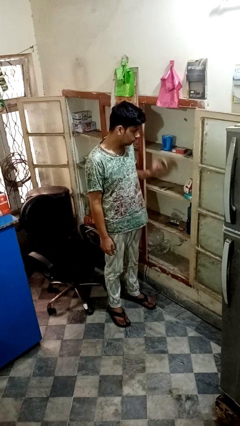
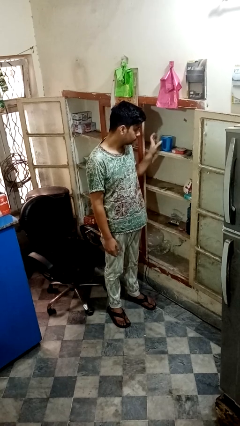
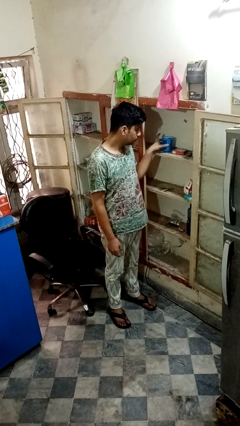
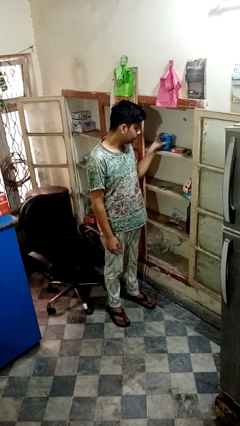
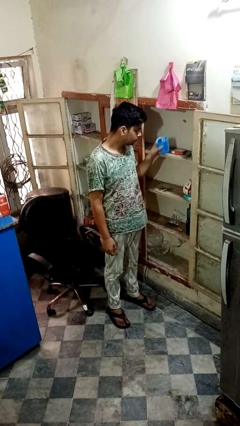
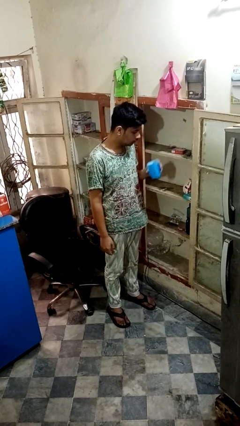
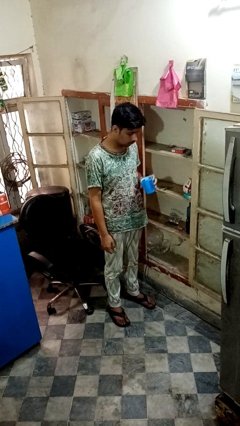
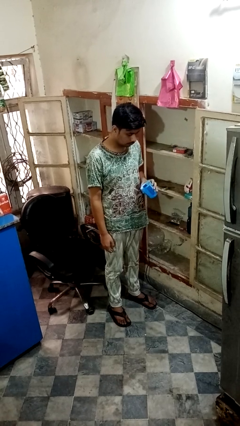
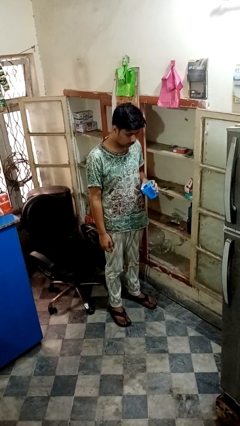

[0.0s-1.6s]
person takes object from cabinet

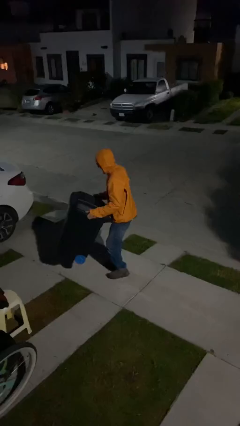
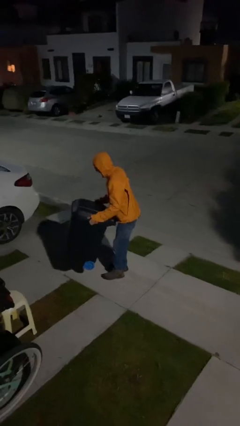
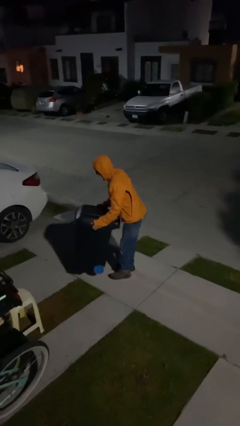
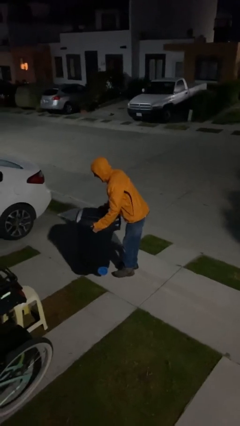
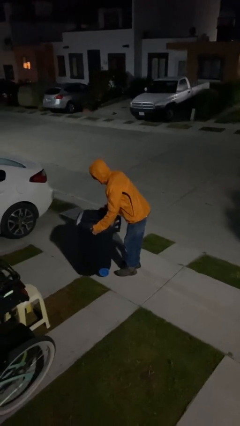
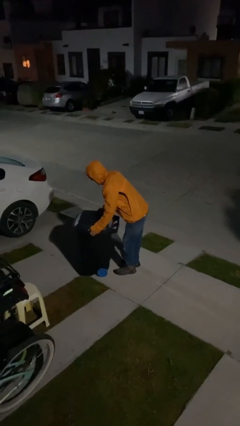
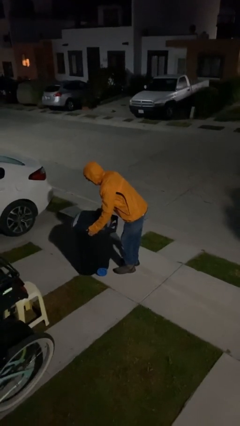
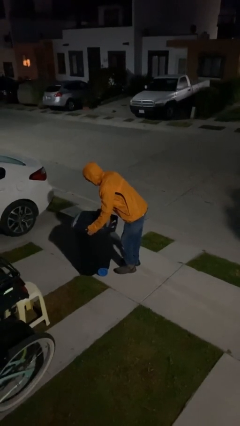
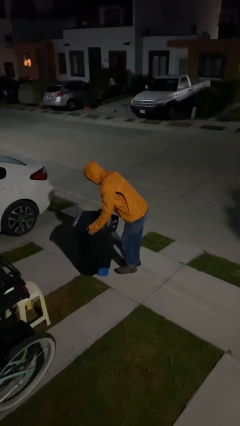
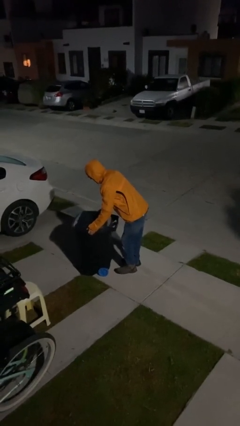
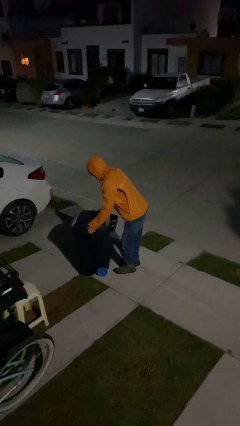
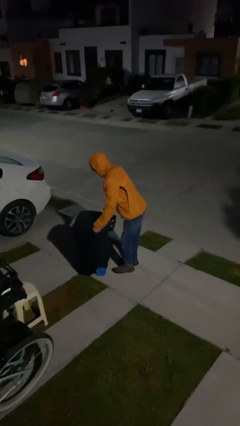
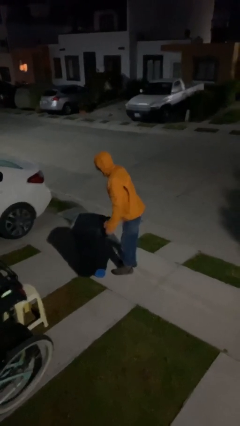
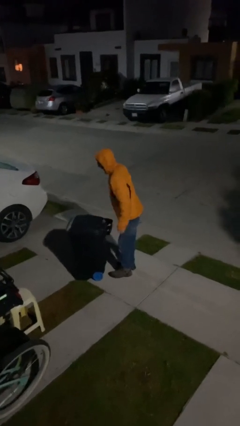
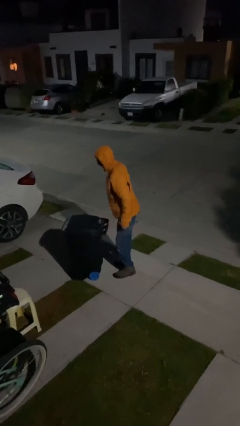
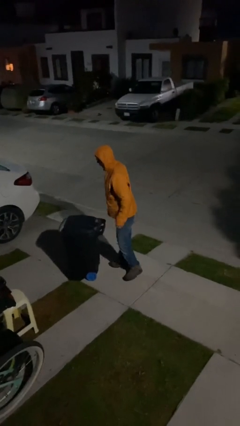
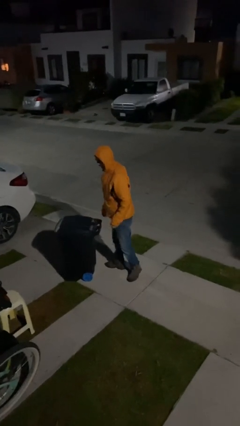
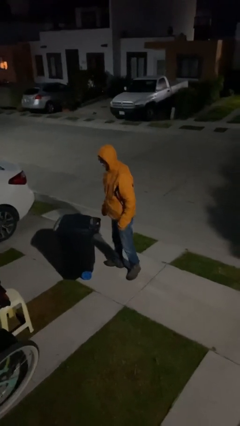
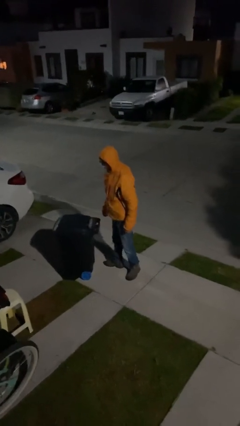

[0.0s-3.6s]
person puts down object on floor

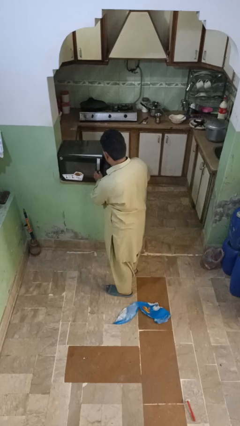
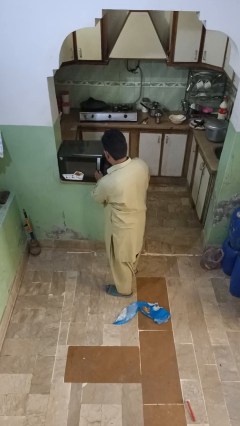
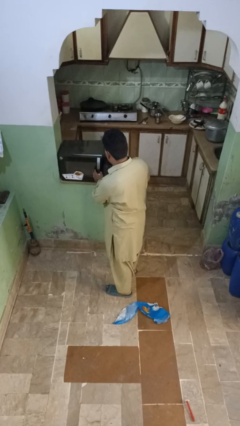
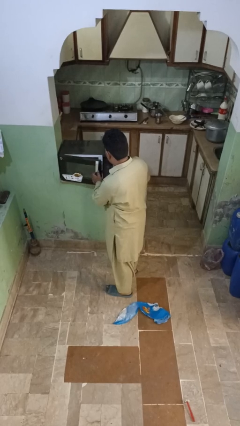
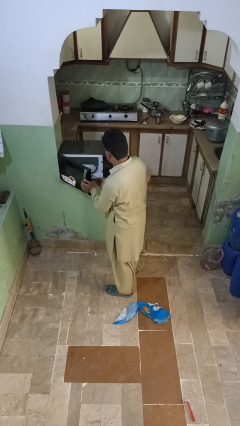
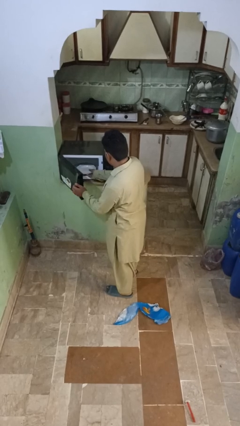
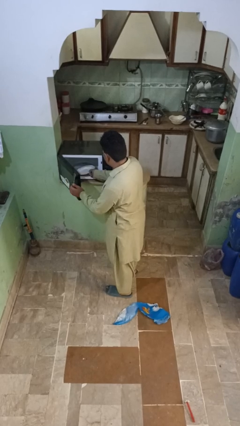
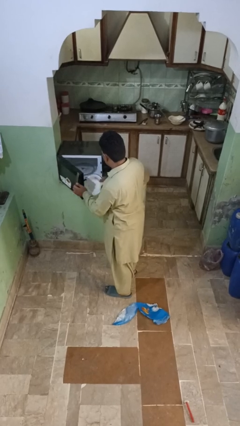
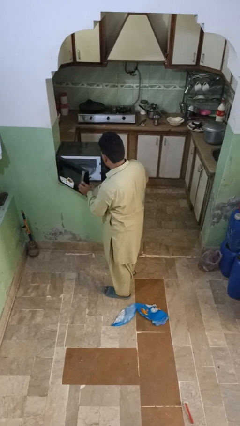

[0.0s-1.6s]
person takes object from microwave

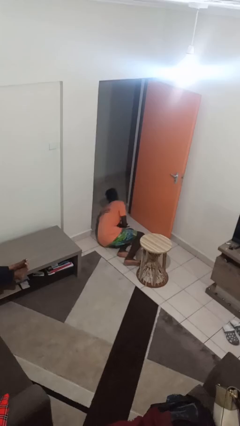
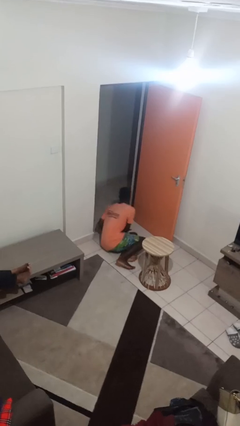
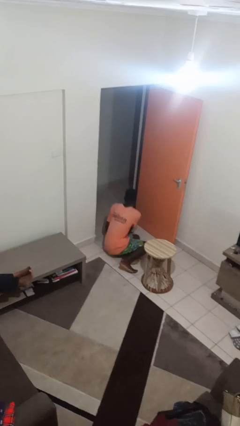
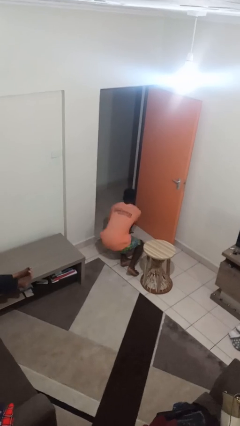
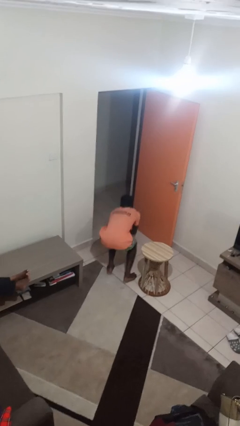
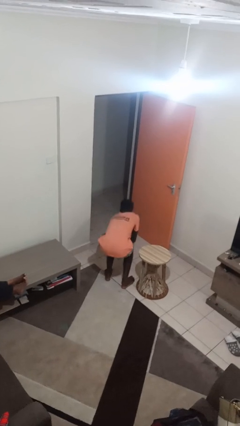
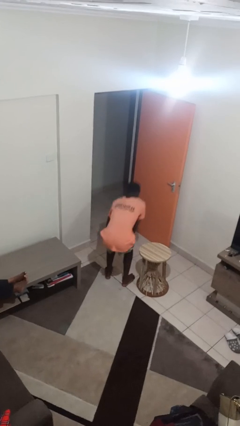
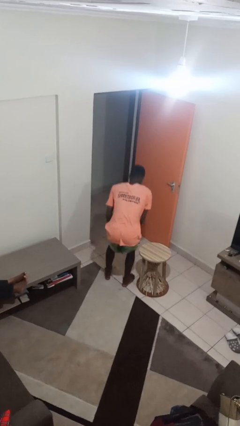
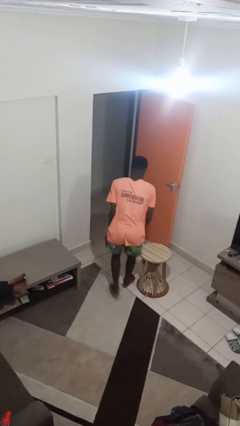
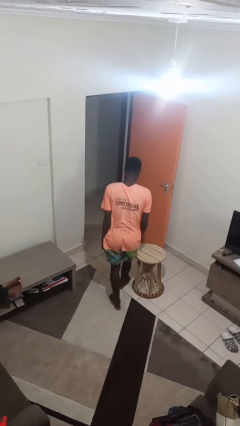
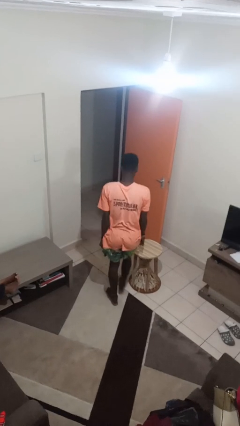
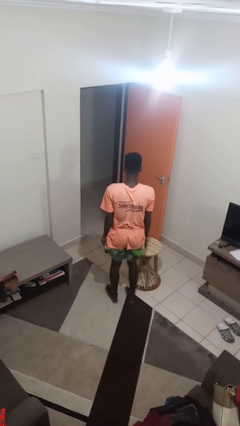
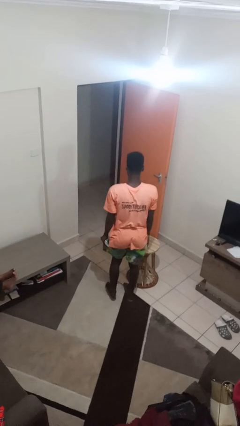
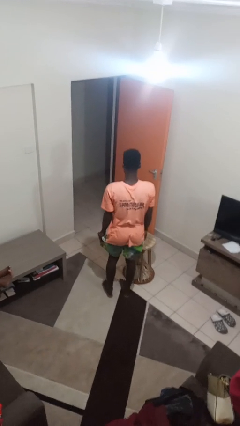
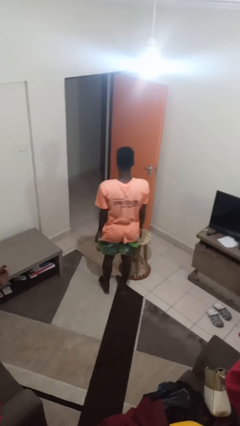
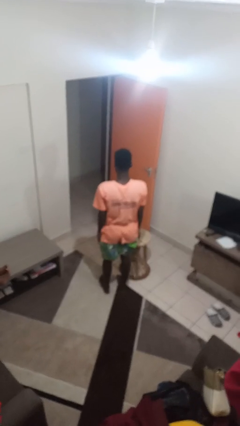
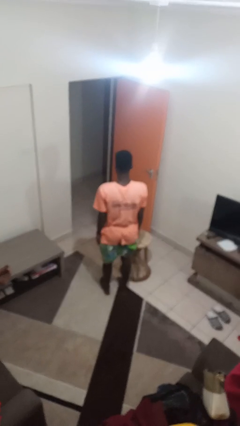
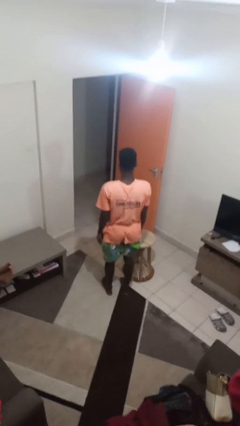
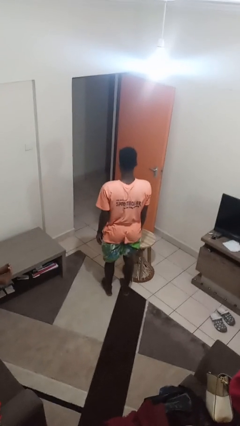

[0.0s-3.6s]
person stands up from floor

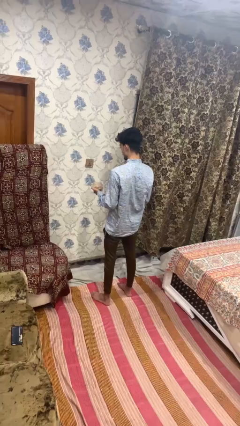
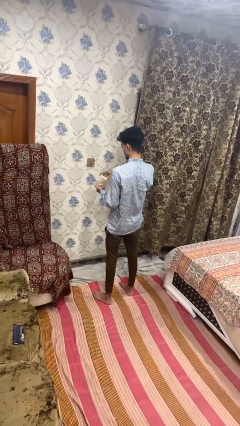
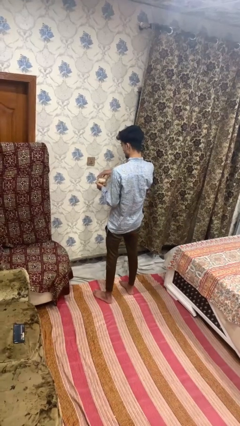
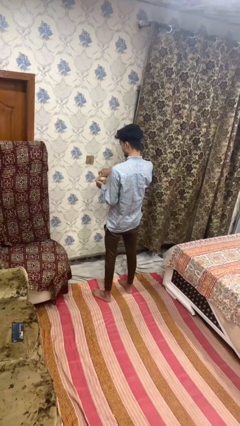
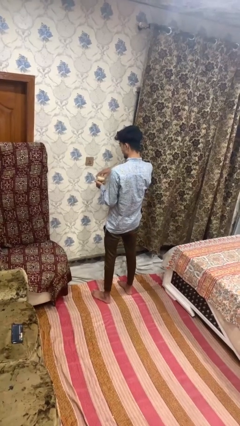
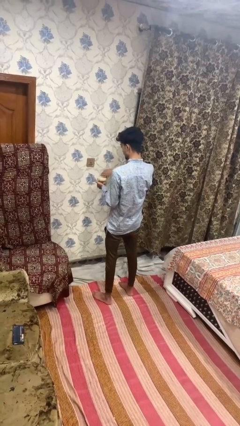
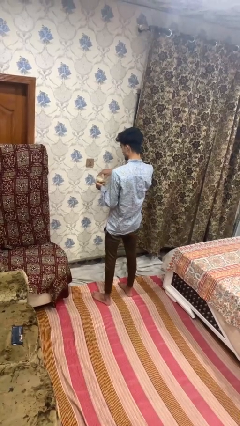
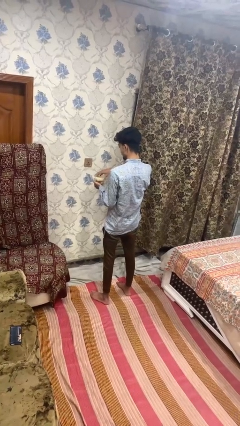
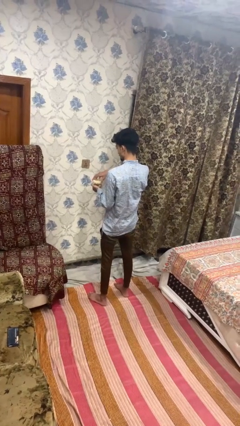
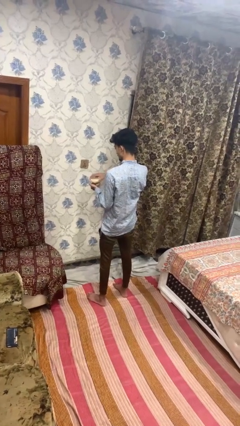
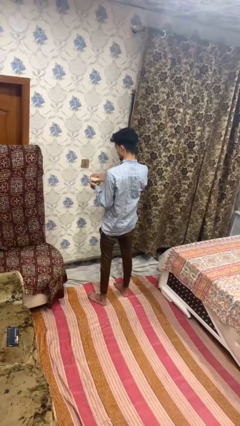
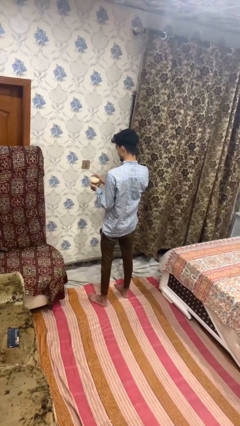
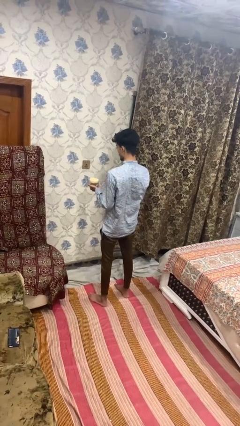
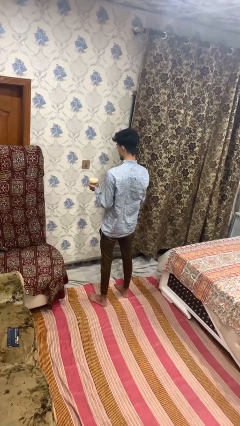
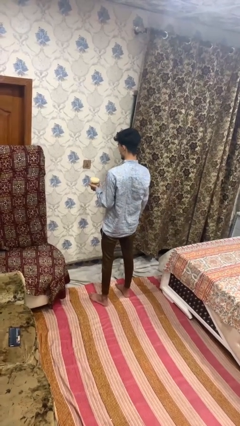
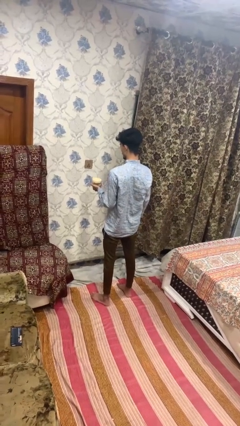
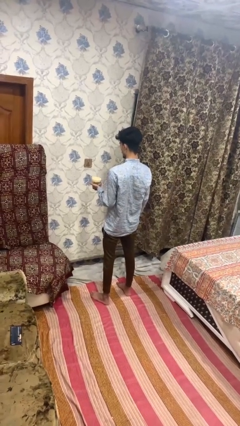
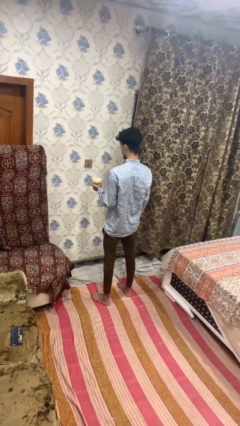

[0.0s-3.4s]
person closes jar

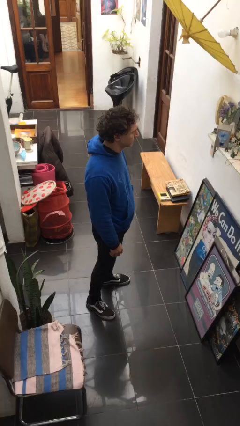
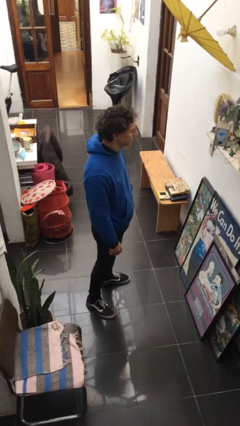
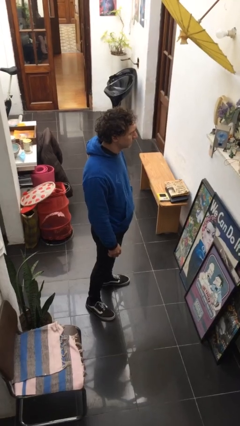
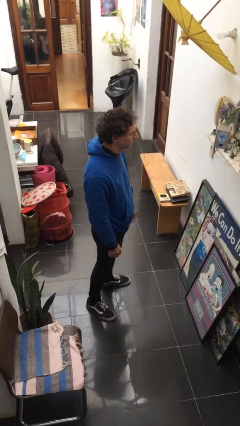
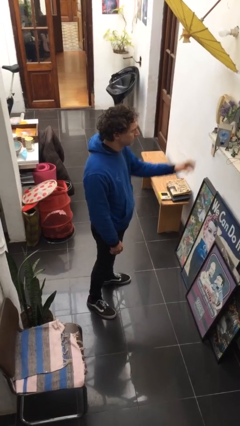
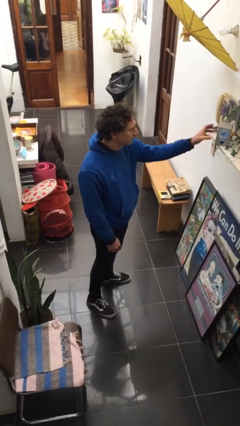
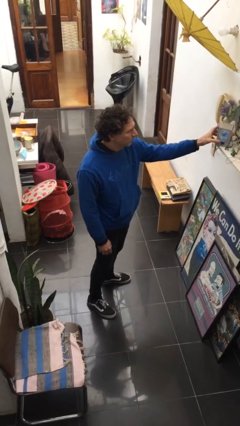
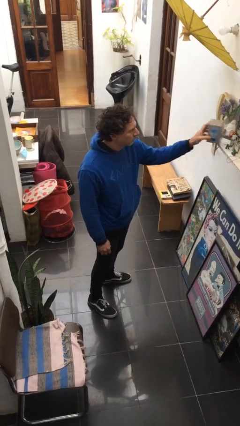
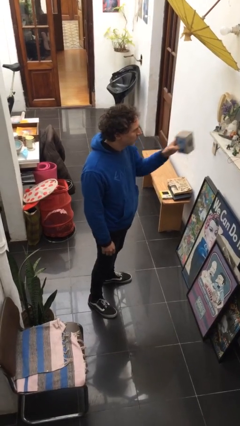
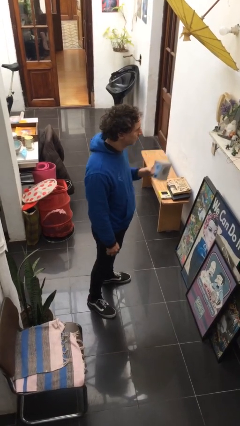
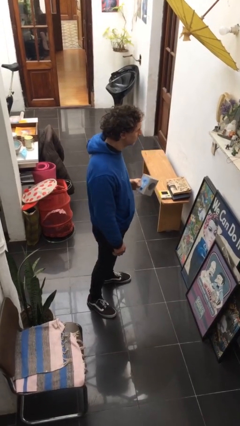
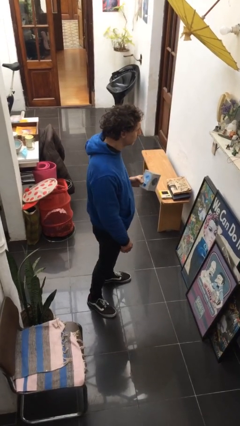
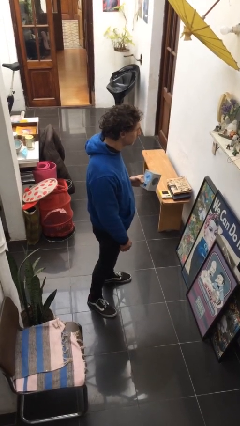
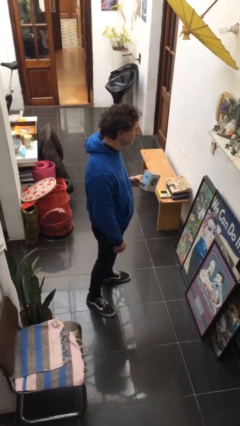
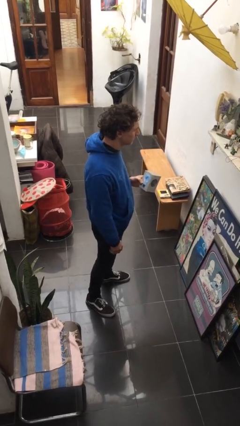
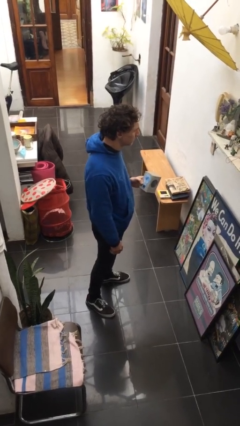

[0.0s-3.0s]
person picks up object from countertop

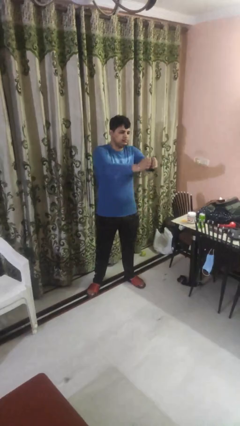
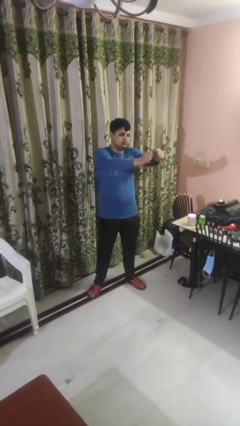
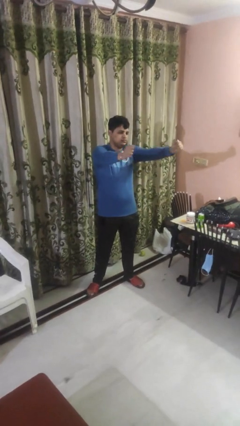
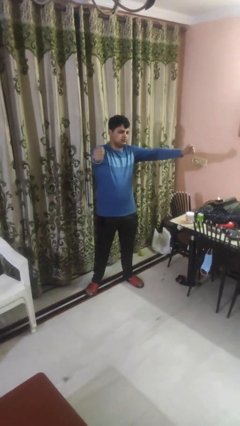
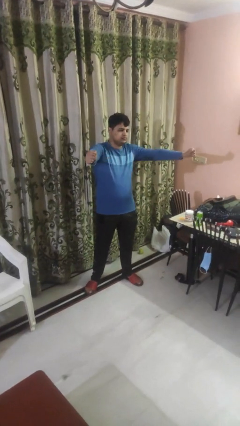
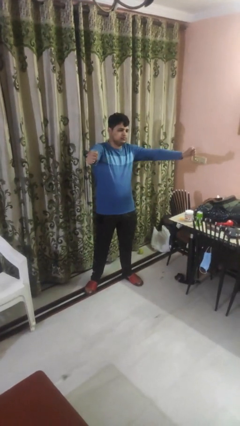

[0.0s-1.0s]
person gestures zoom in
